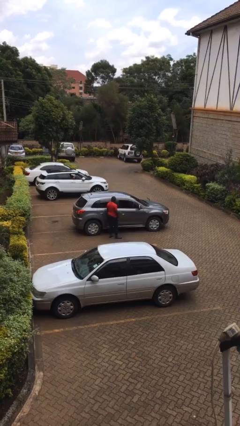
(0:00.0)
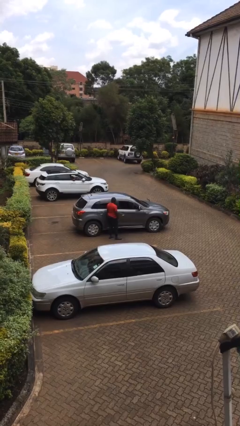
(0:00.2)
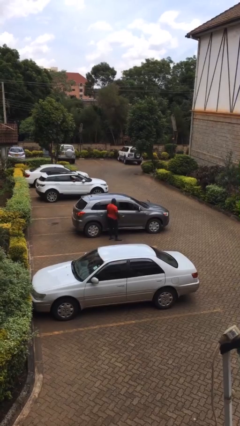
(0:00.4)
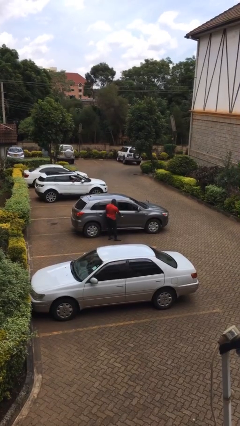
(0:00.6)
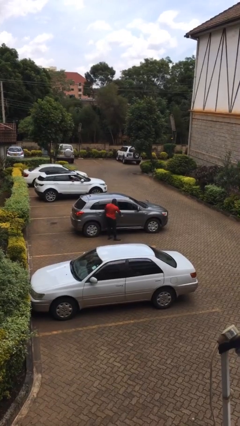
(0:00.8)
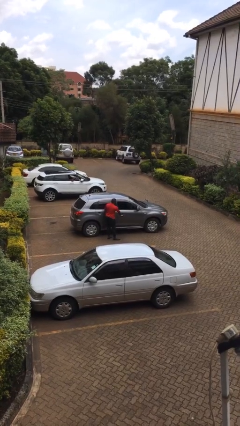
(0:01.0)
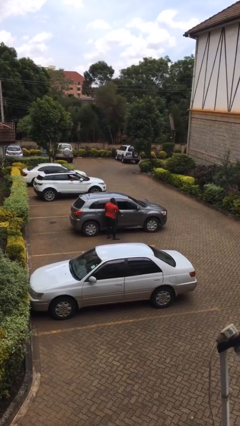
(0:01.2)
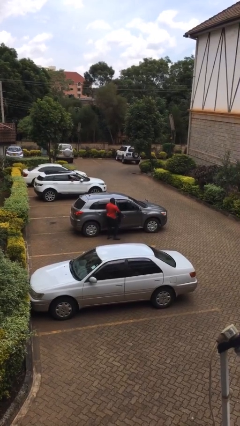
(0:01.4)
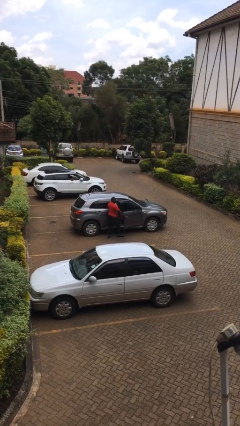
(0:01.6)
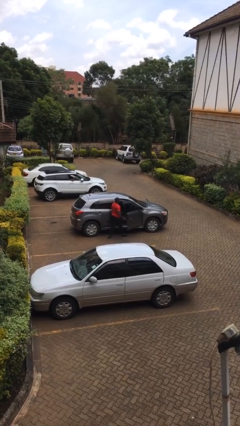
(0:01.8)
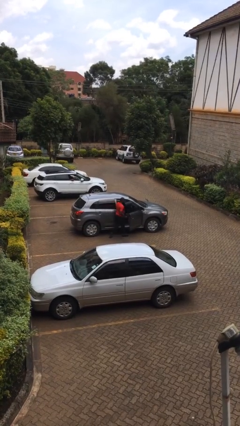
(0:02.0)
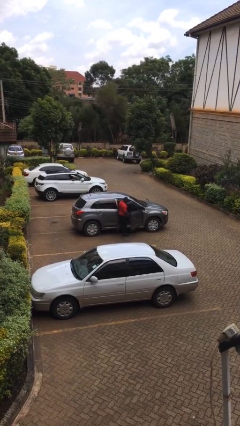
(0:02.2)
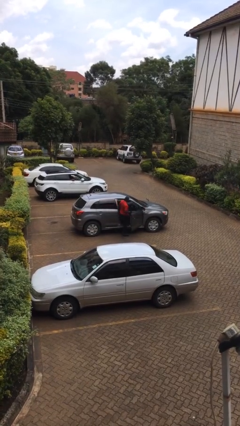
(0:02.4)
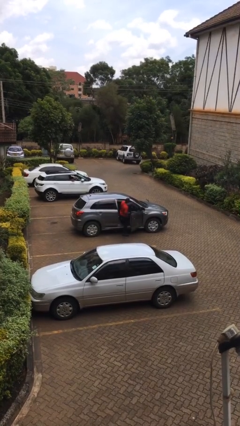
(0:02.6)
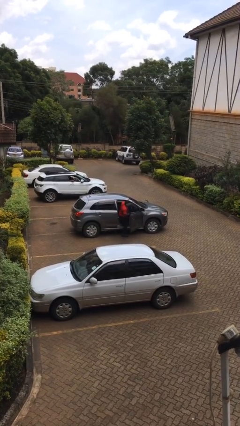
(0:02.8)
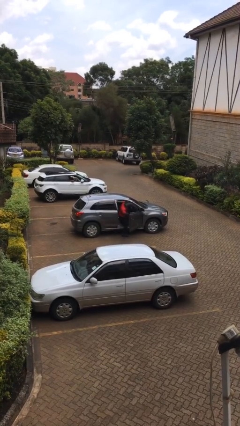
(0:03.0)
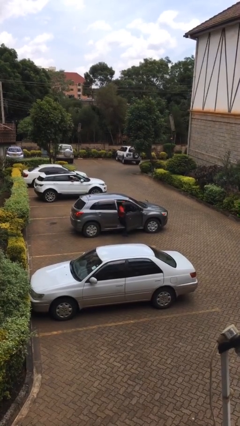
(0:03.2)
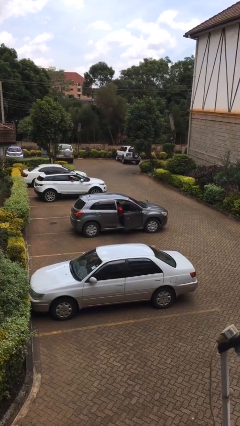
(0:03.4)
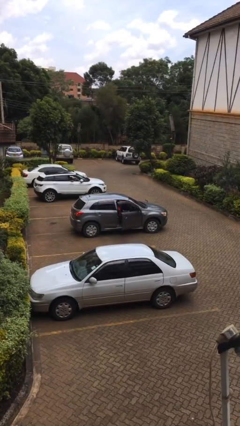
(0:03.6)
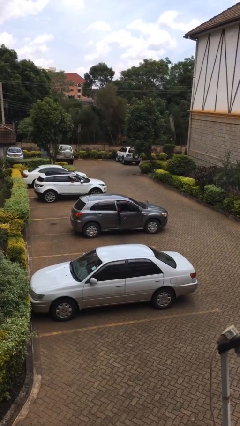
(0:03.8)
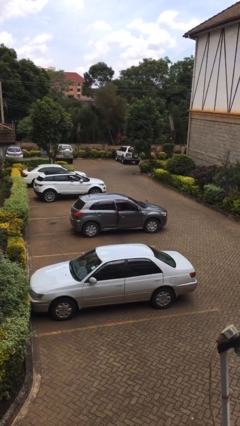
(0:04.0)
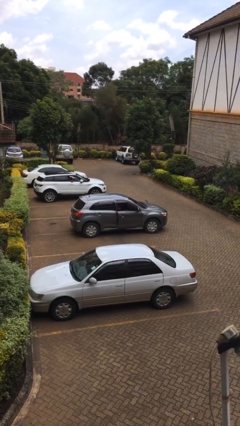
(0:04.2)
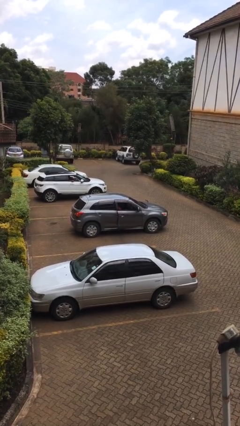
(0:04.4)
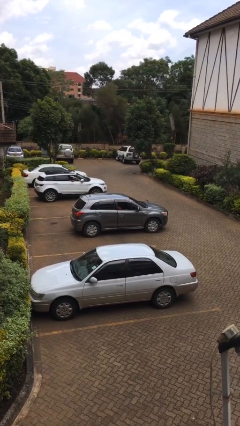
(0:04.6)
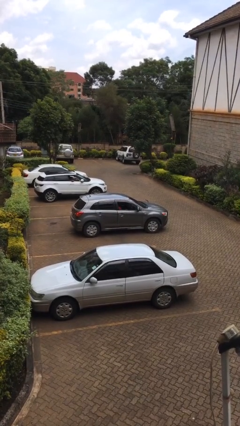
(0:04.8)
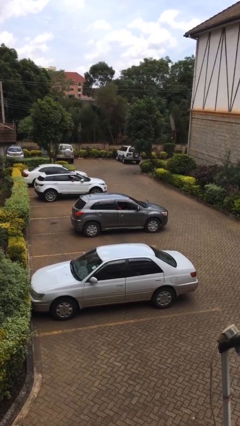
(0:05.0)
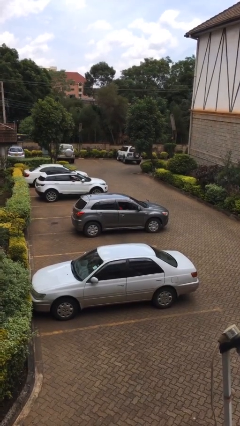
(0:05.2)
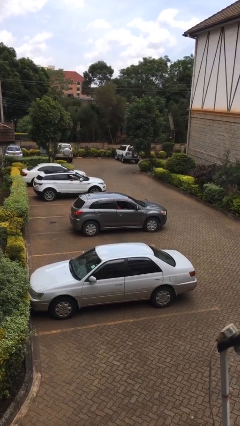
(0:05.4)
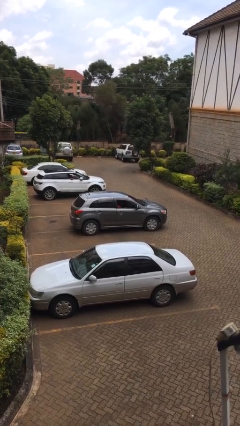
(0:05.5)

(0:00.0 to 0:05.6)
car picks up person

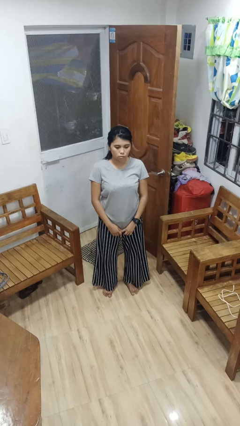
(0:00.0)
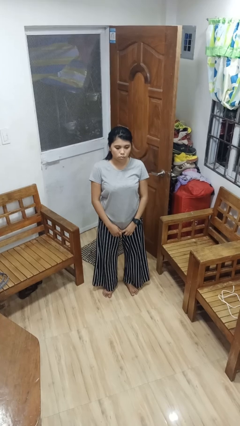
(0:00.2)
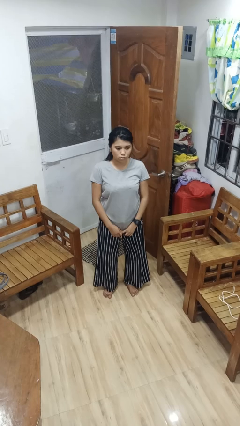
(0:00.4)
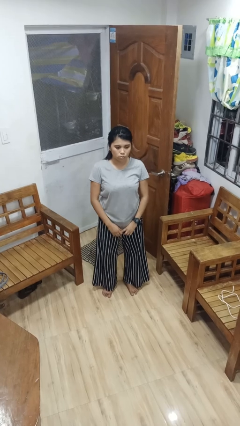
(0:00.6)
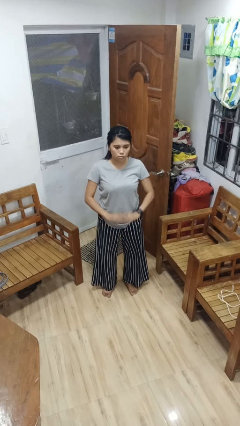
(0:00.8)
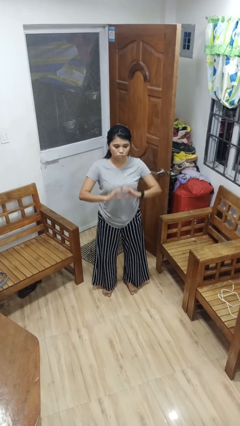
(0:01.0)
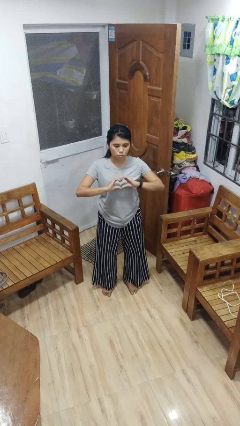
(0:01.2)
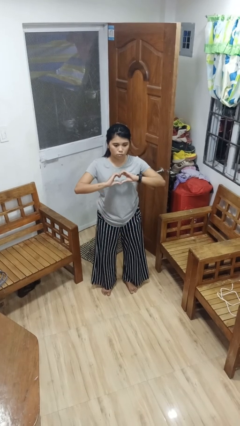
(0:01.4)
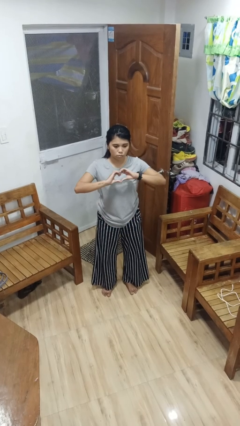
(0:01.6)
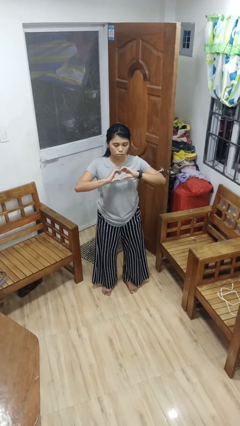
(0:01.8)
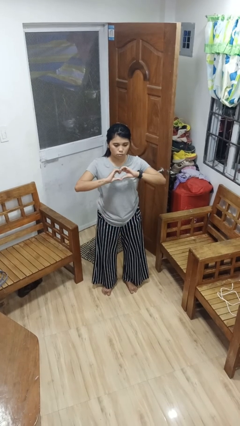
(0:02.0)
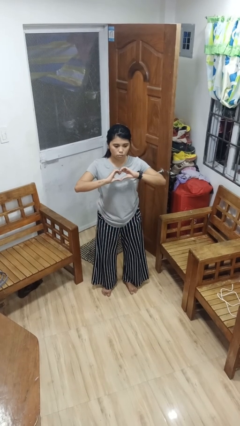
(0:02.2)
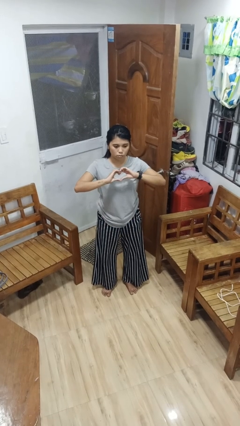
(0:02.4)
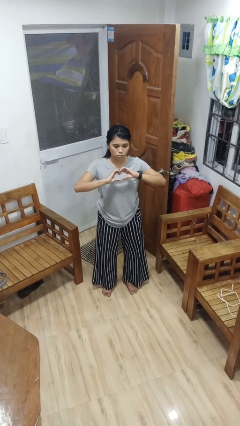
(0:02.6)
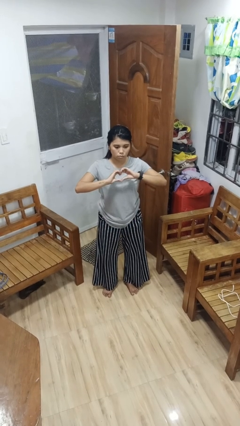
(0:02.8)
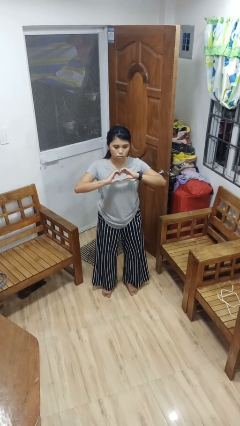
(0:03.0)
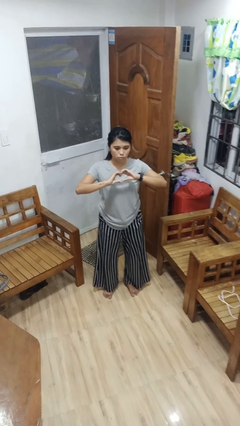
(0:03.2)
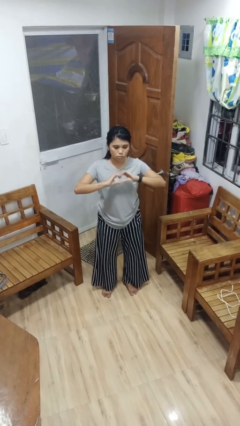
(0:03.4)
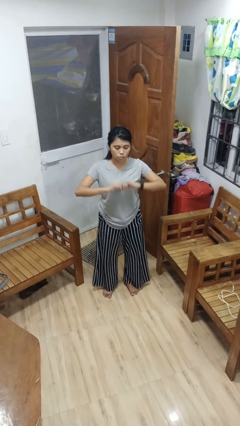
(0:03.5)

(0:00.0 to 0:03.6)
person gestures heart

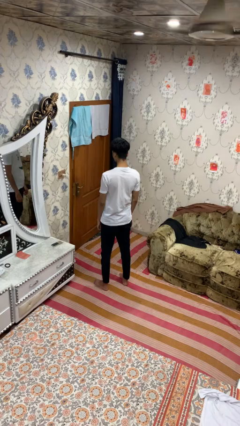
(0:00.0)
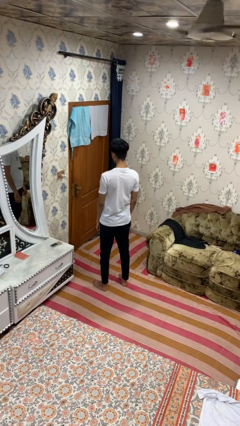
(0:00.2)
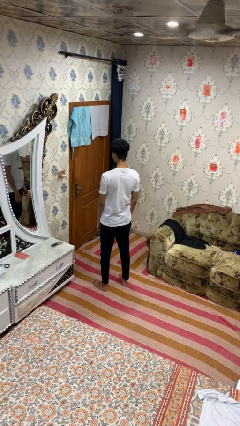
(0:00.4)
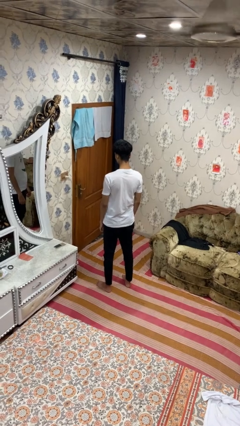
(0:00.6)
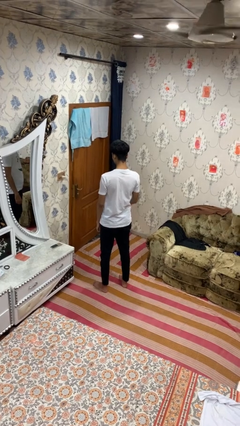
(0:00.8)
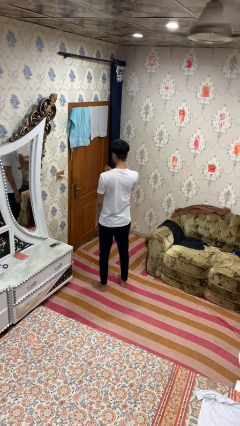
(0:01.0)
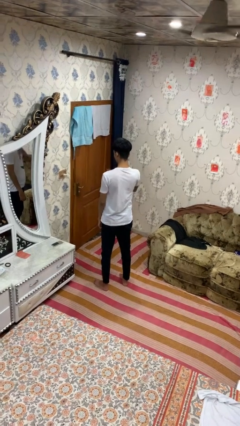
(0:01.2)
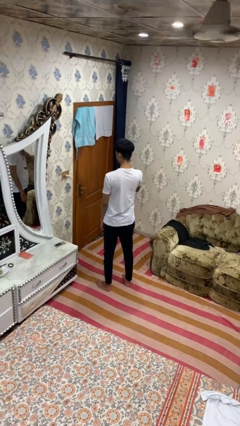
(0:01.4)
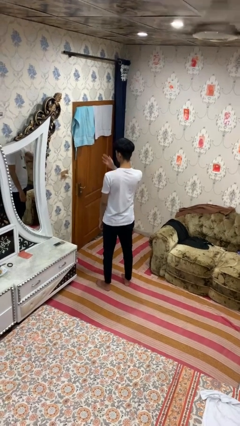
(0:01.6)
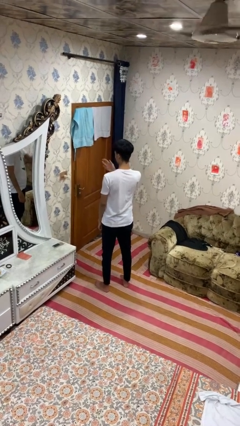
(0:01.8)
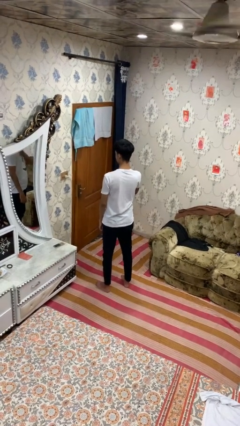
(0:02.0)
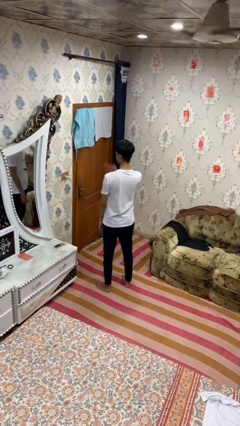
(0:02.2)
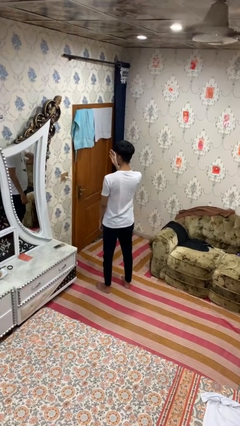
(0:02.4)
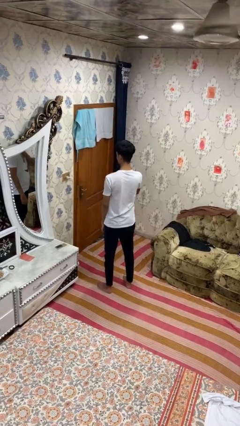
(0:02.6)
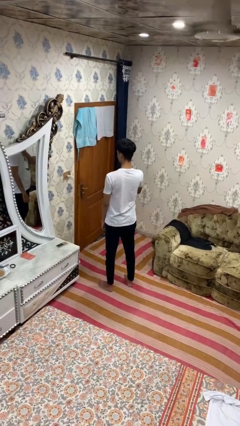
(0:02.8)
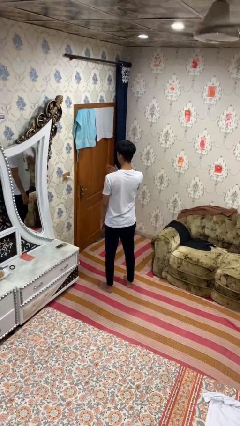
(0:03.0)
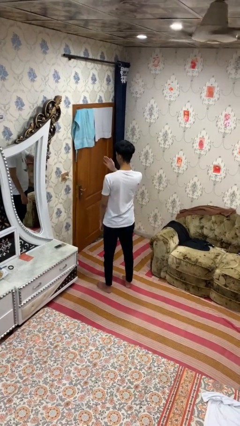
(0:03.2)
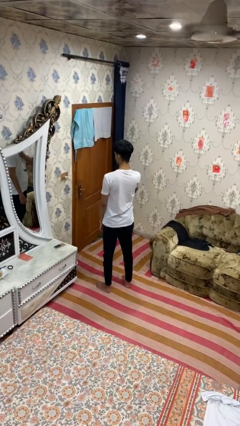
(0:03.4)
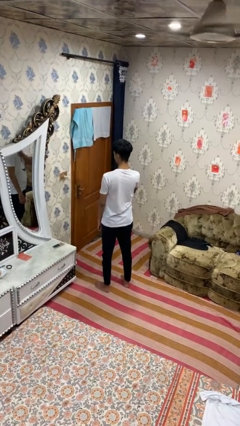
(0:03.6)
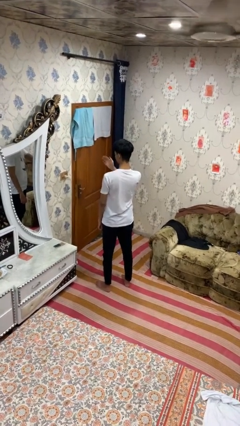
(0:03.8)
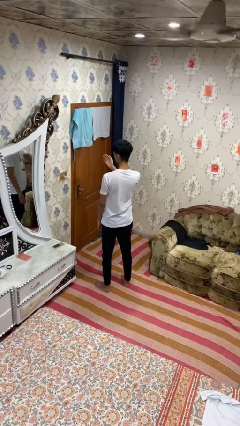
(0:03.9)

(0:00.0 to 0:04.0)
person drums on chest

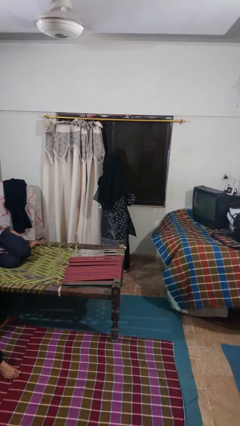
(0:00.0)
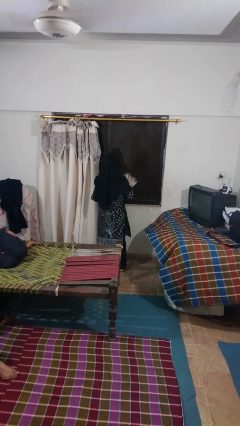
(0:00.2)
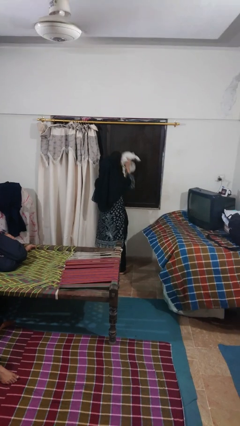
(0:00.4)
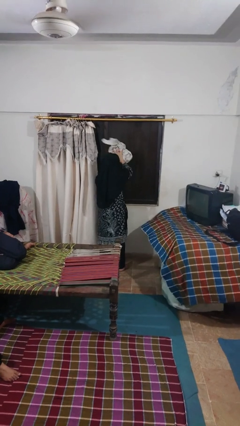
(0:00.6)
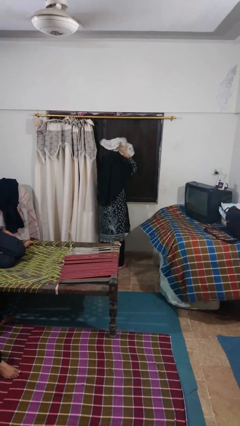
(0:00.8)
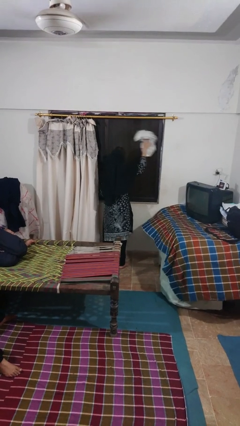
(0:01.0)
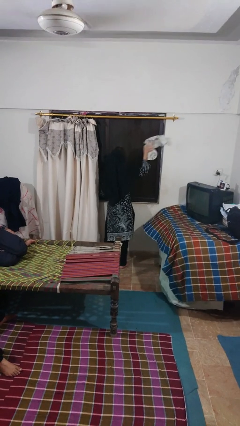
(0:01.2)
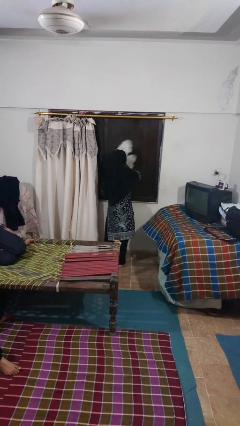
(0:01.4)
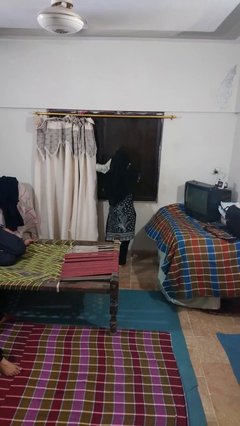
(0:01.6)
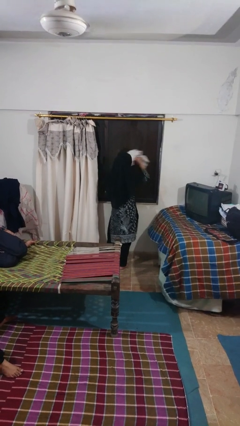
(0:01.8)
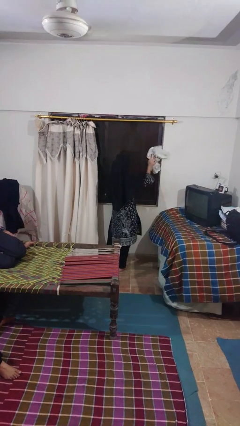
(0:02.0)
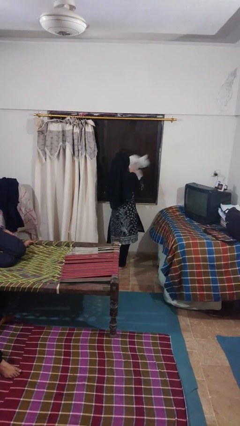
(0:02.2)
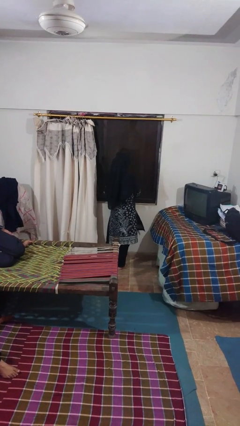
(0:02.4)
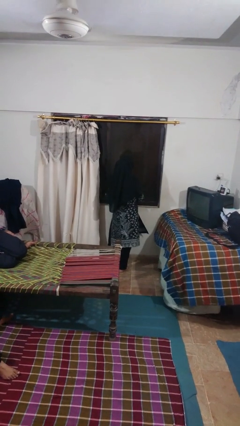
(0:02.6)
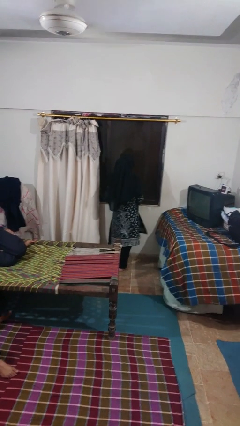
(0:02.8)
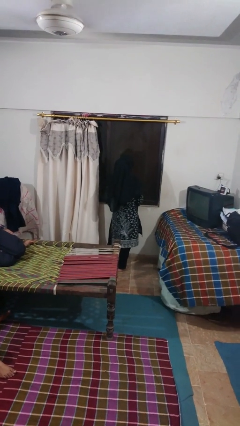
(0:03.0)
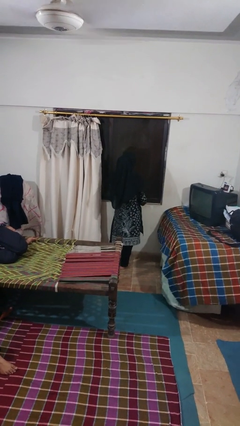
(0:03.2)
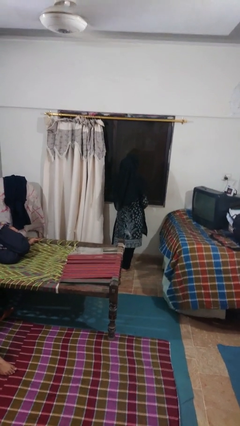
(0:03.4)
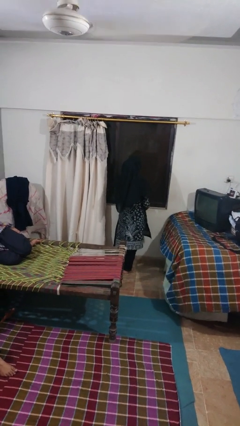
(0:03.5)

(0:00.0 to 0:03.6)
person washes window

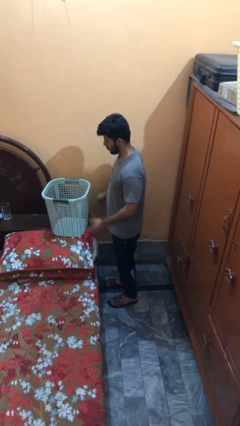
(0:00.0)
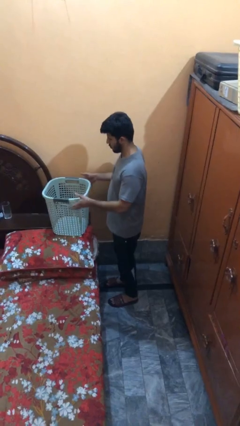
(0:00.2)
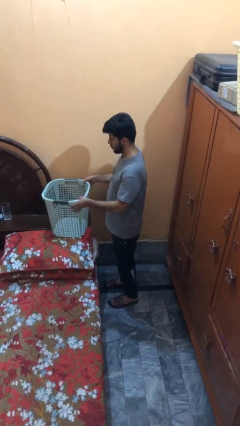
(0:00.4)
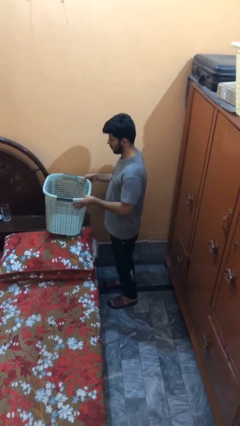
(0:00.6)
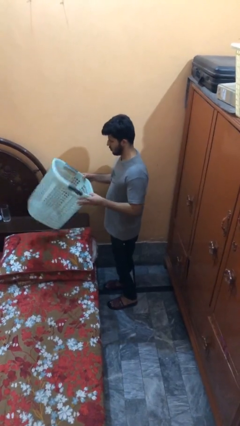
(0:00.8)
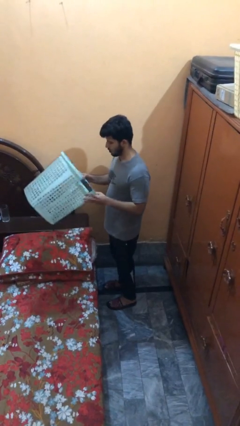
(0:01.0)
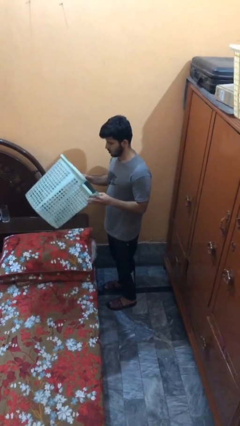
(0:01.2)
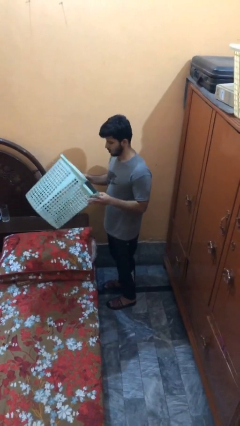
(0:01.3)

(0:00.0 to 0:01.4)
person picks up object from bed
